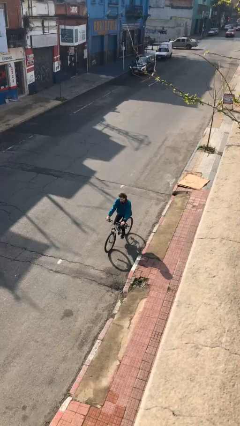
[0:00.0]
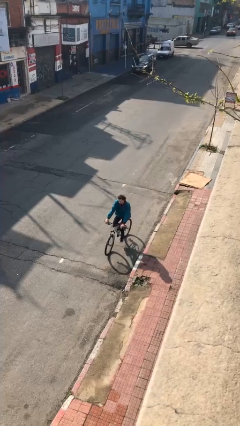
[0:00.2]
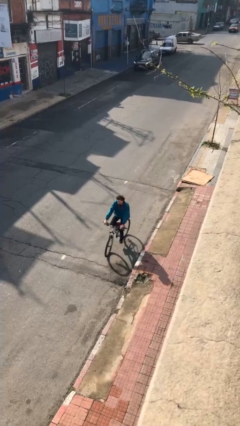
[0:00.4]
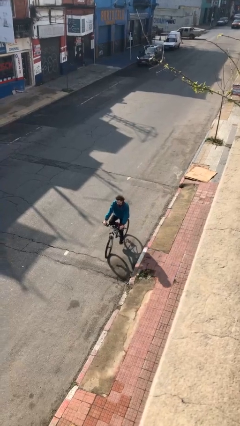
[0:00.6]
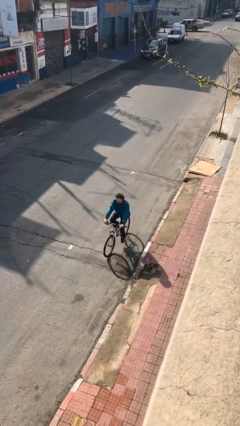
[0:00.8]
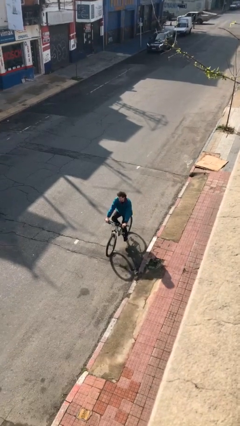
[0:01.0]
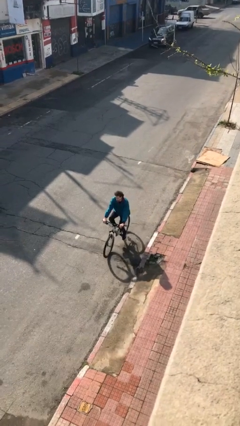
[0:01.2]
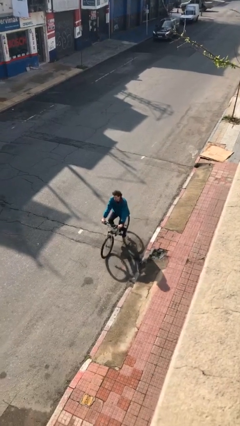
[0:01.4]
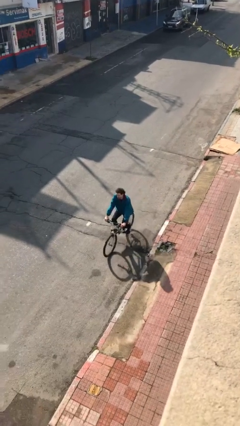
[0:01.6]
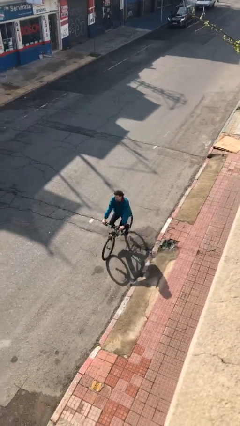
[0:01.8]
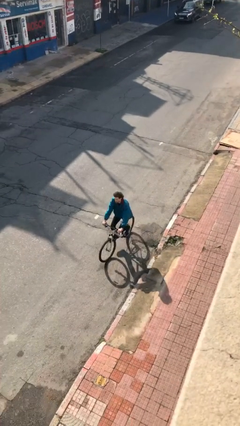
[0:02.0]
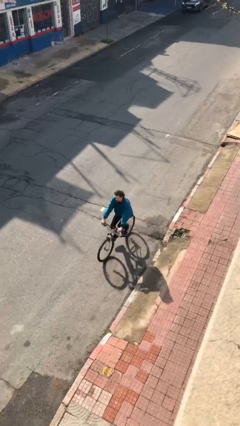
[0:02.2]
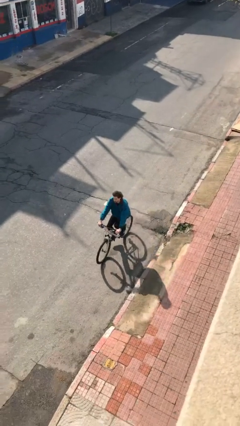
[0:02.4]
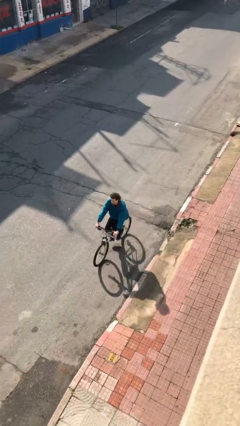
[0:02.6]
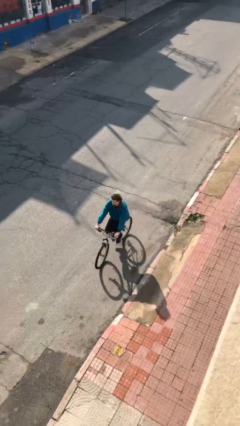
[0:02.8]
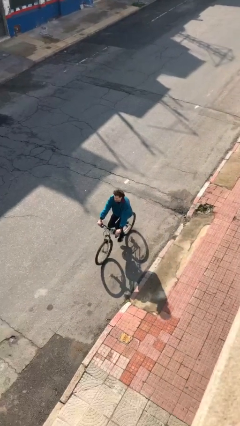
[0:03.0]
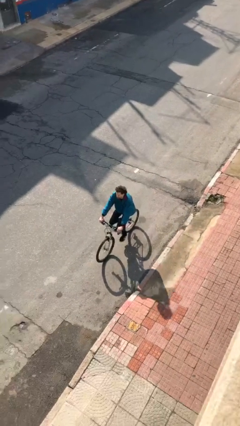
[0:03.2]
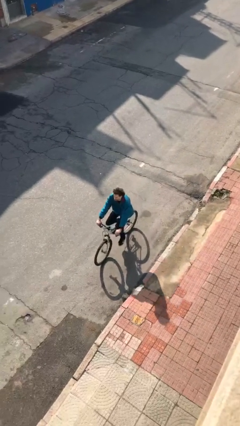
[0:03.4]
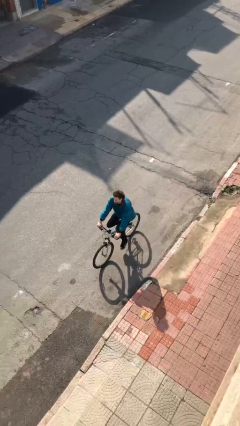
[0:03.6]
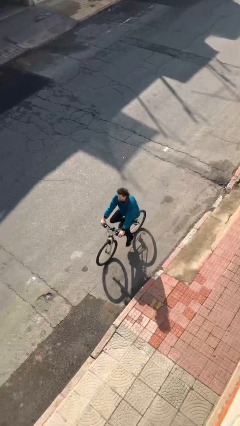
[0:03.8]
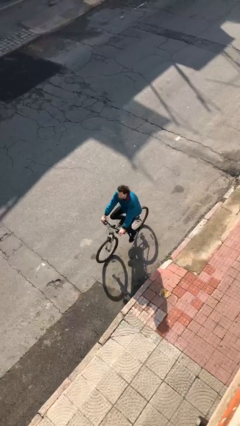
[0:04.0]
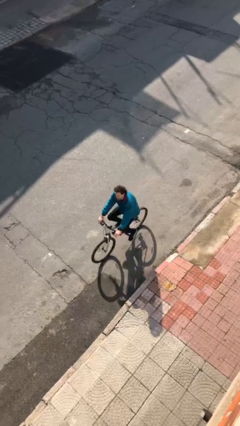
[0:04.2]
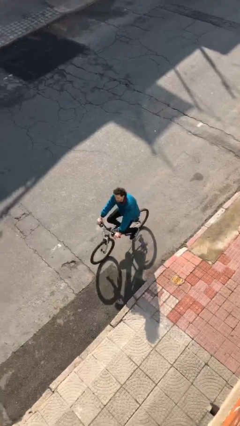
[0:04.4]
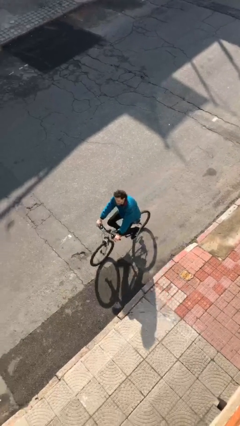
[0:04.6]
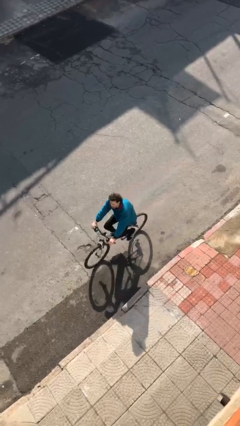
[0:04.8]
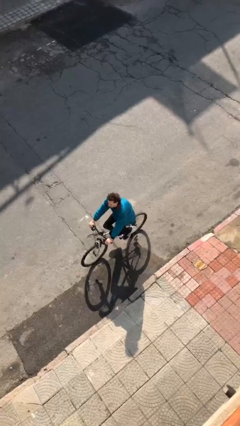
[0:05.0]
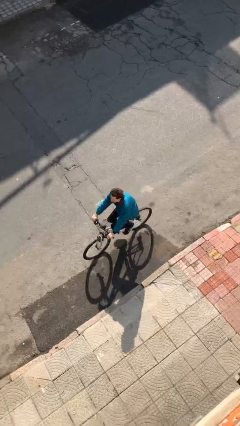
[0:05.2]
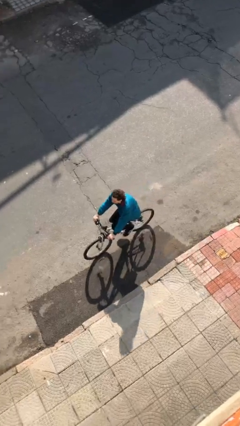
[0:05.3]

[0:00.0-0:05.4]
person rides bicycle

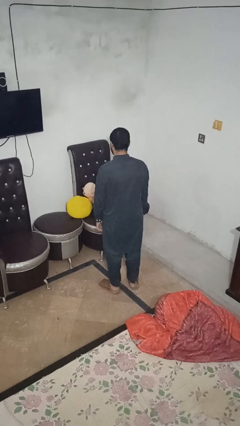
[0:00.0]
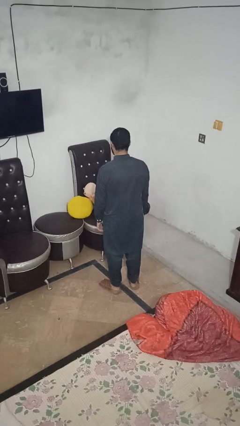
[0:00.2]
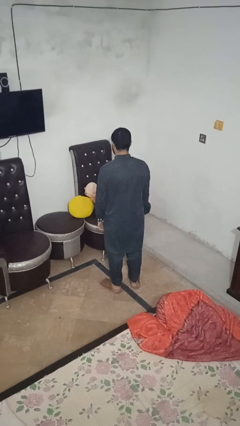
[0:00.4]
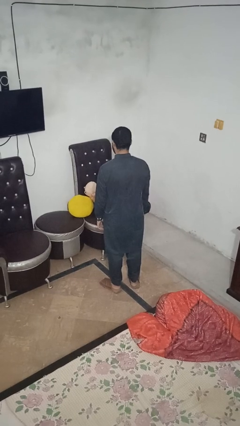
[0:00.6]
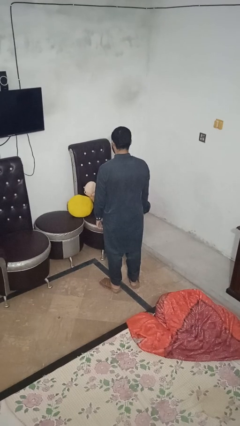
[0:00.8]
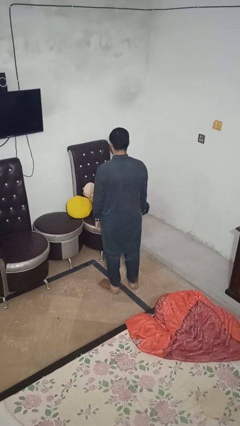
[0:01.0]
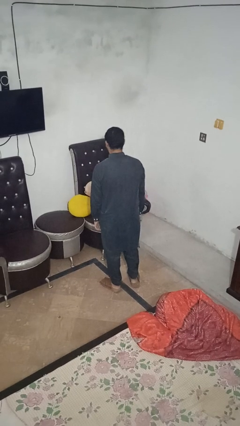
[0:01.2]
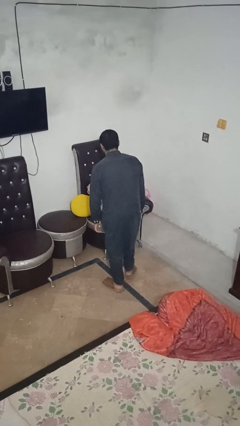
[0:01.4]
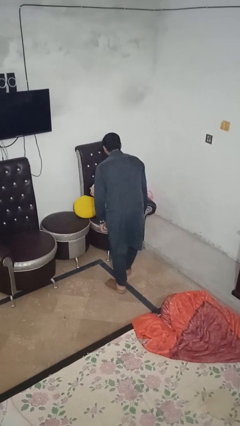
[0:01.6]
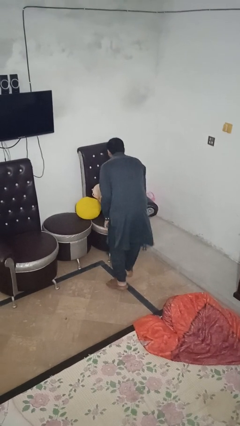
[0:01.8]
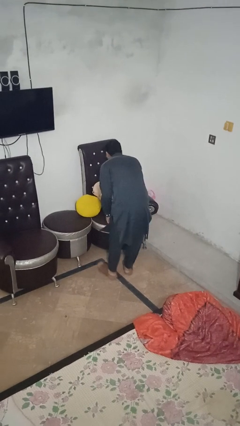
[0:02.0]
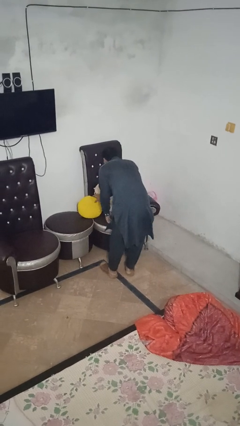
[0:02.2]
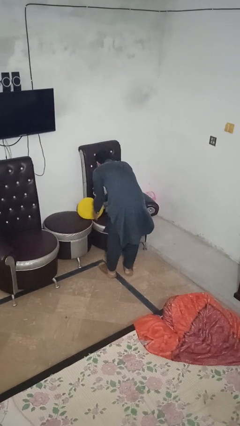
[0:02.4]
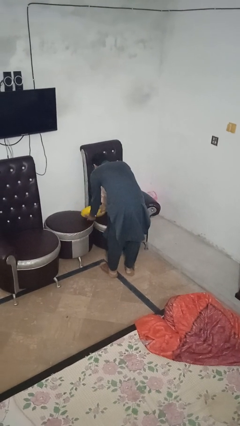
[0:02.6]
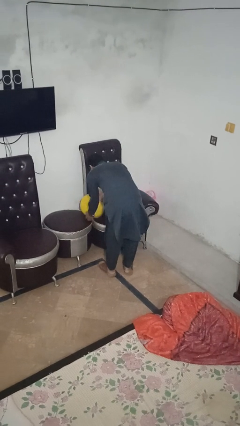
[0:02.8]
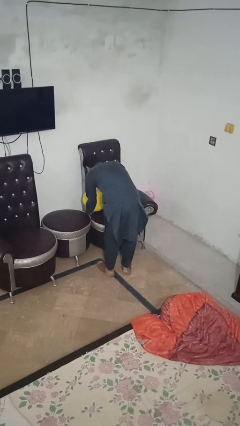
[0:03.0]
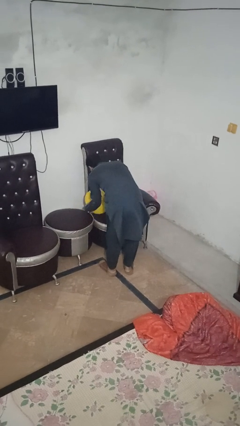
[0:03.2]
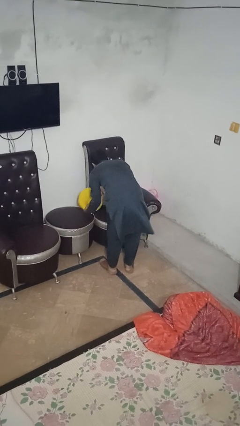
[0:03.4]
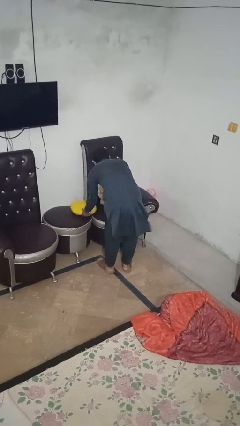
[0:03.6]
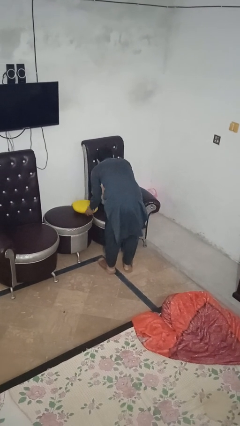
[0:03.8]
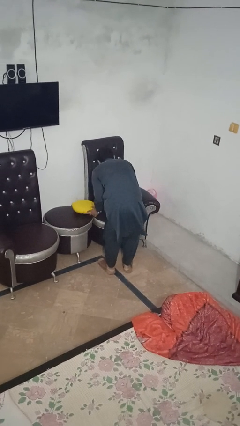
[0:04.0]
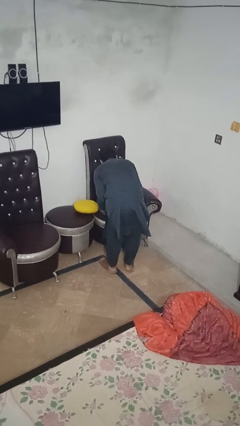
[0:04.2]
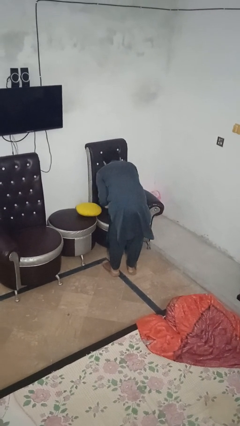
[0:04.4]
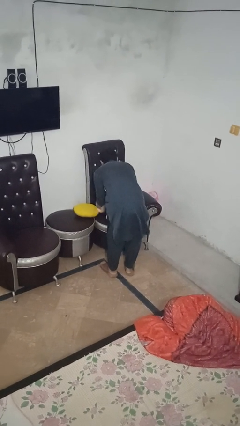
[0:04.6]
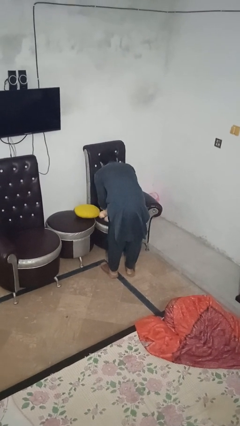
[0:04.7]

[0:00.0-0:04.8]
person searches in couch

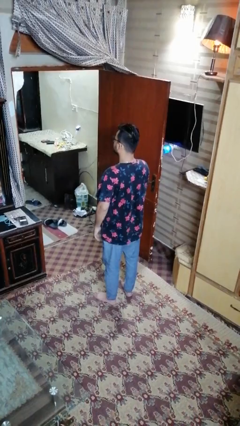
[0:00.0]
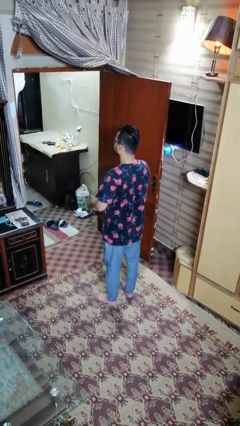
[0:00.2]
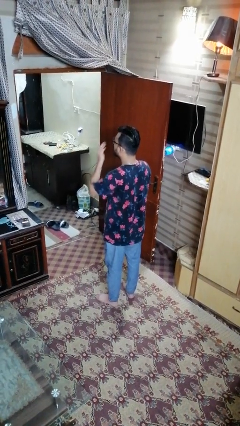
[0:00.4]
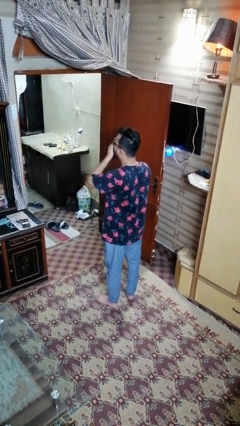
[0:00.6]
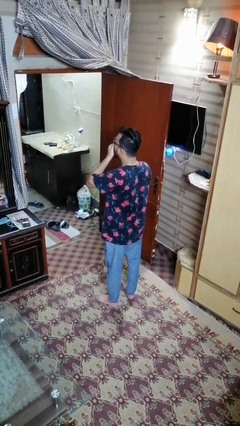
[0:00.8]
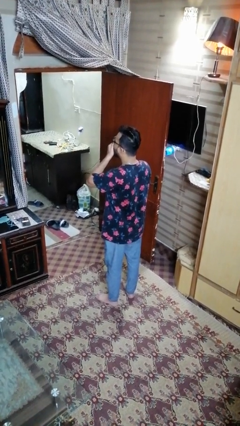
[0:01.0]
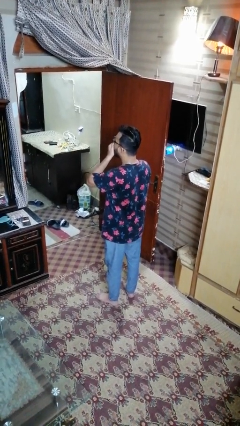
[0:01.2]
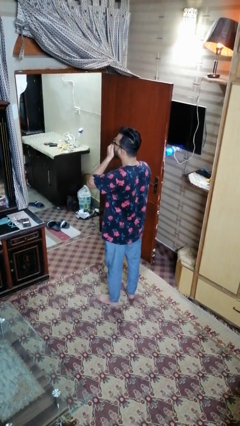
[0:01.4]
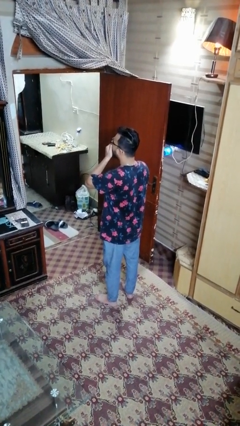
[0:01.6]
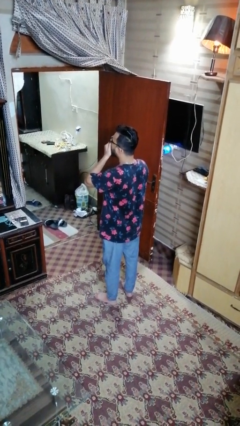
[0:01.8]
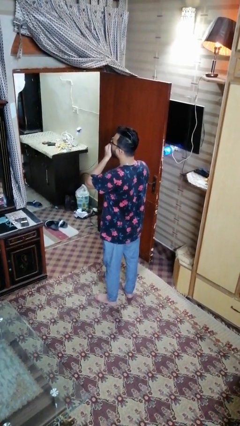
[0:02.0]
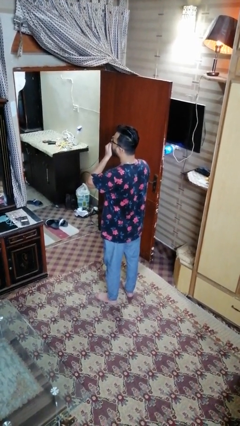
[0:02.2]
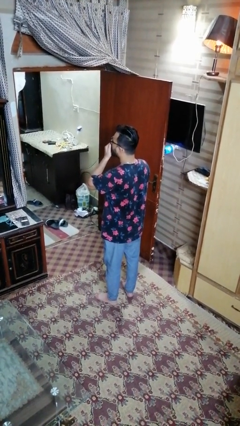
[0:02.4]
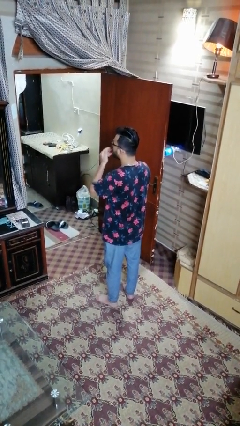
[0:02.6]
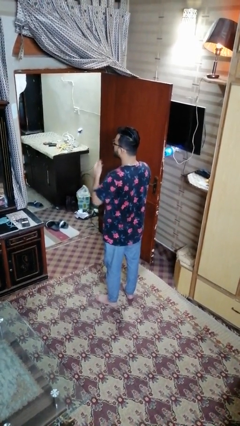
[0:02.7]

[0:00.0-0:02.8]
person yawns

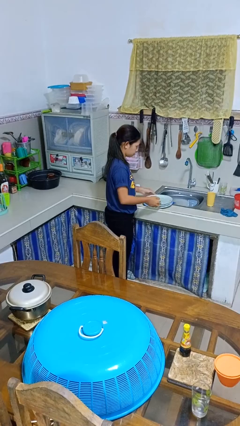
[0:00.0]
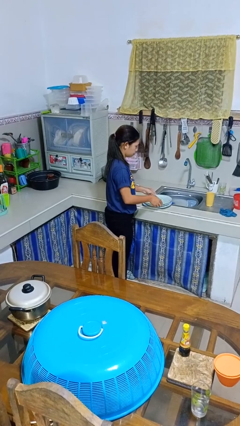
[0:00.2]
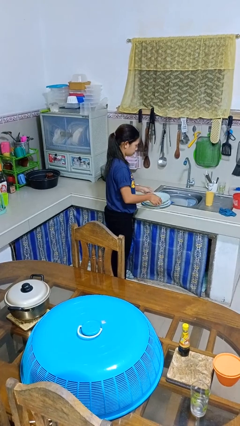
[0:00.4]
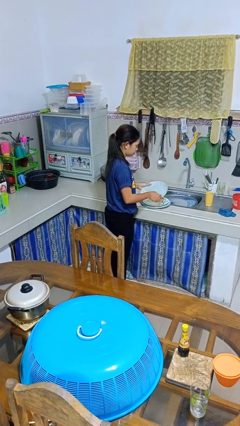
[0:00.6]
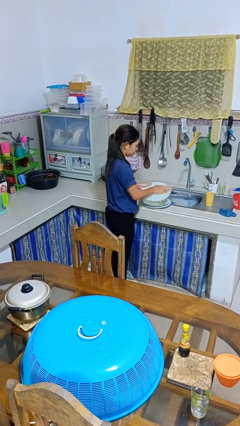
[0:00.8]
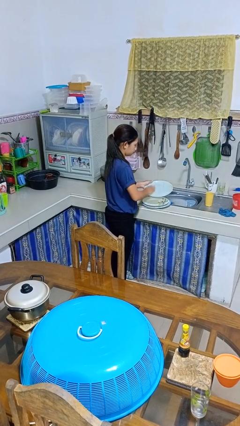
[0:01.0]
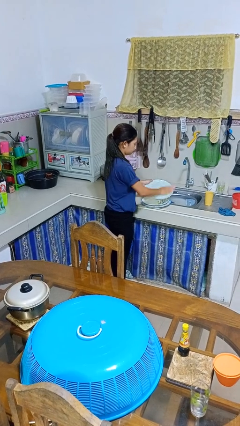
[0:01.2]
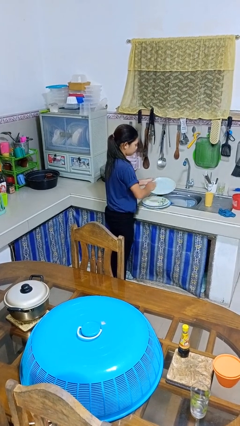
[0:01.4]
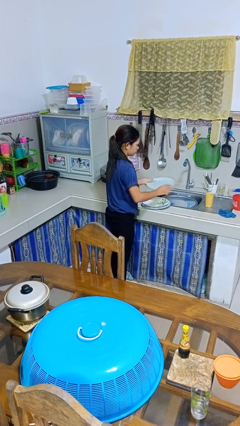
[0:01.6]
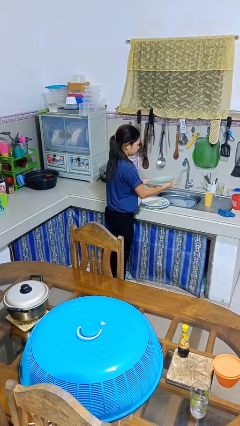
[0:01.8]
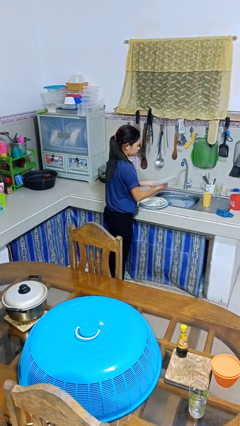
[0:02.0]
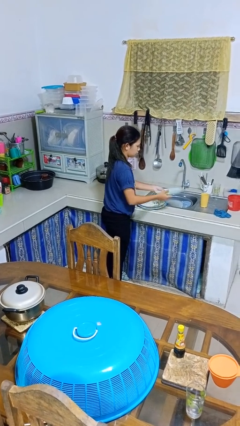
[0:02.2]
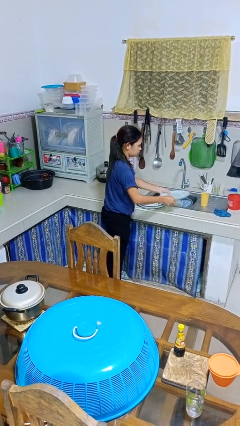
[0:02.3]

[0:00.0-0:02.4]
person washes dish

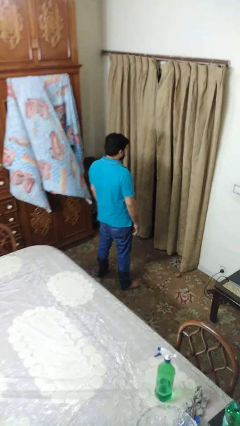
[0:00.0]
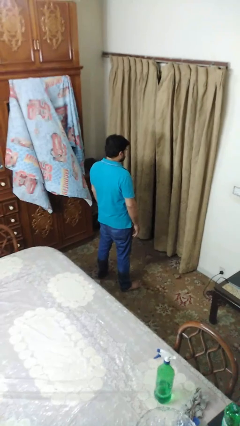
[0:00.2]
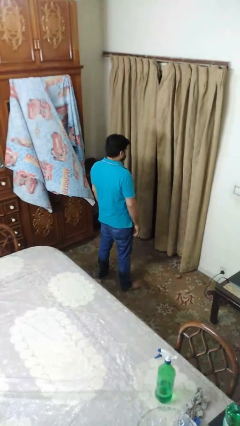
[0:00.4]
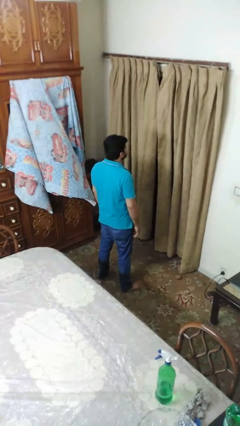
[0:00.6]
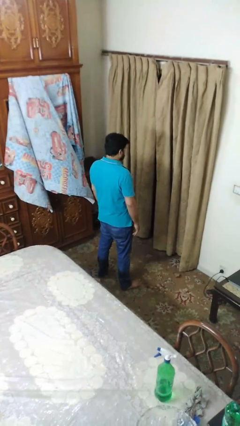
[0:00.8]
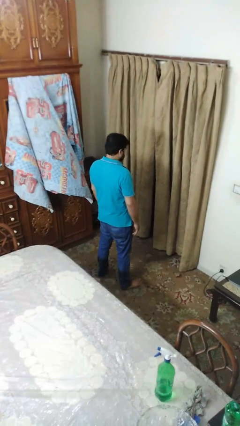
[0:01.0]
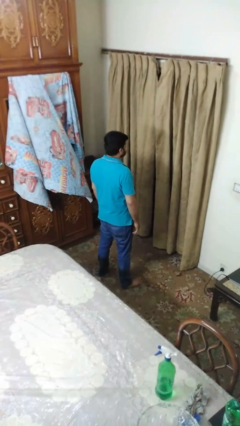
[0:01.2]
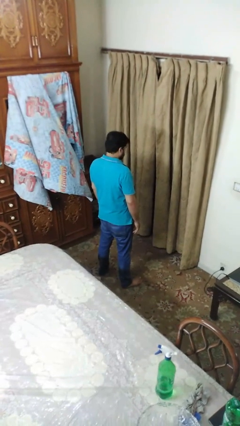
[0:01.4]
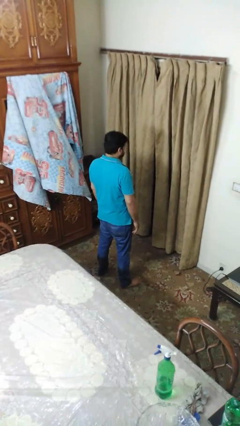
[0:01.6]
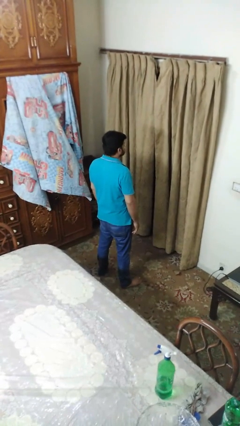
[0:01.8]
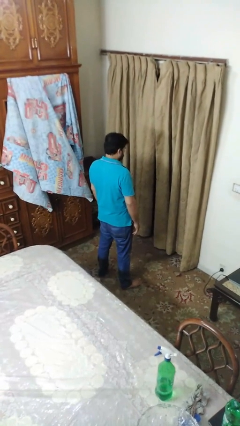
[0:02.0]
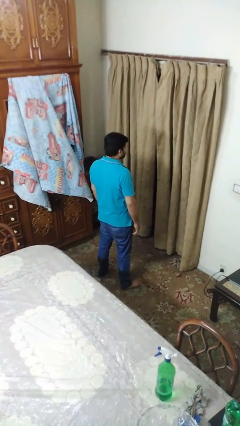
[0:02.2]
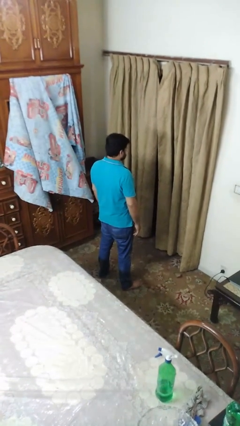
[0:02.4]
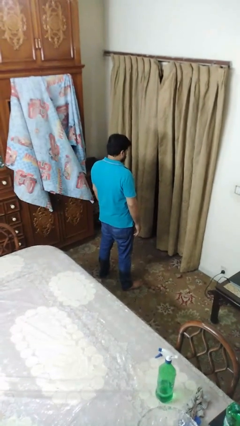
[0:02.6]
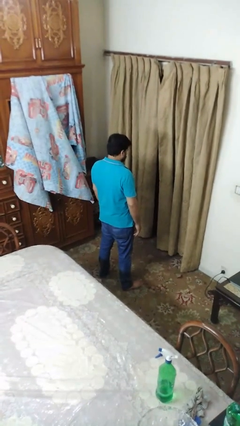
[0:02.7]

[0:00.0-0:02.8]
person nods head
